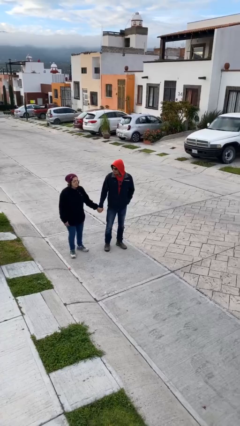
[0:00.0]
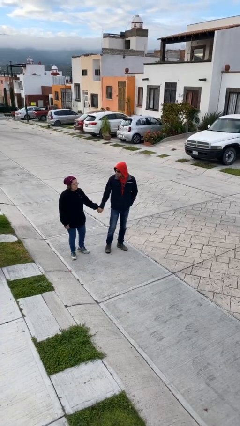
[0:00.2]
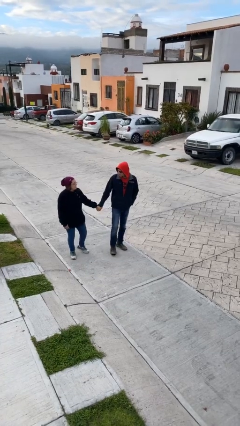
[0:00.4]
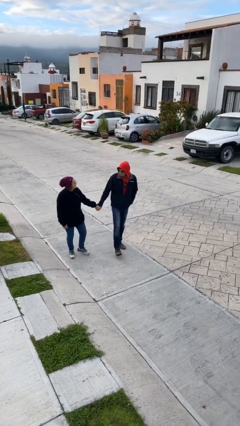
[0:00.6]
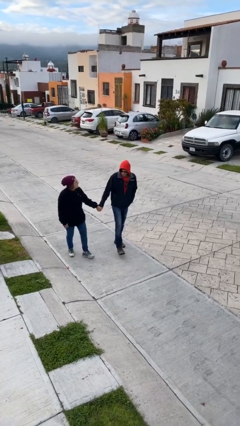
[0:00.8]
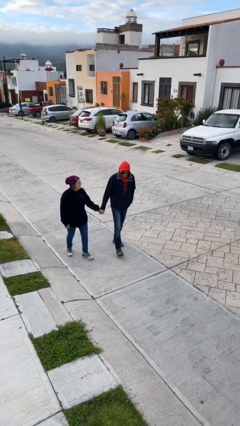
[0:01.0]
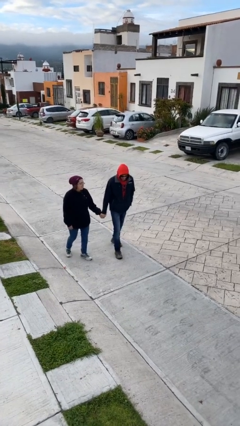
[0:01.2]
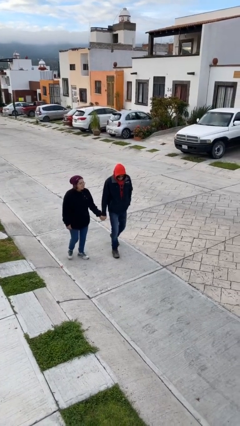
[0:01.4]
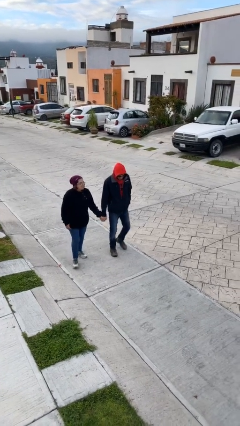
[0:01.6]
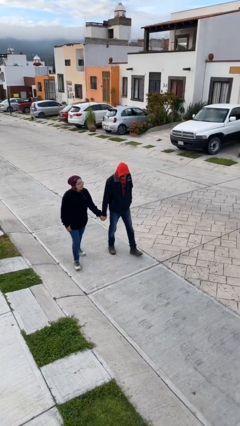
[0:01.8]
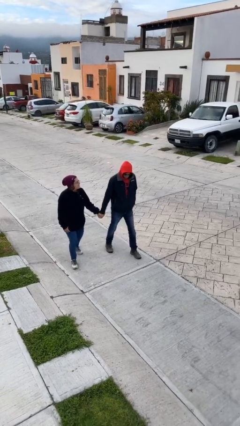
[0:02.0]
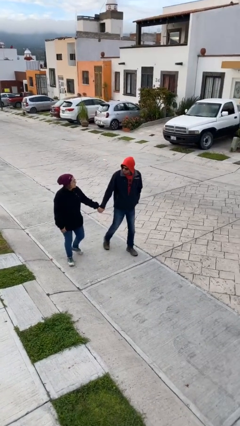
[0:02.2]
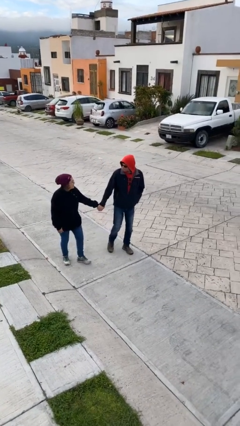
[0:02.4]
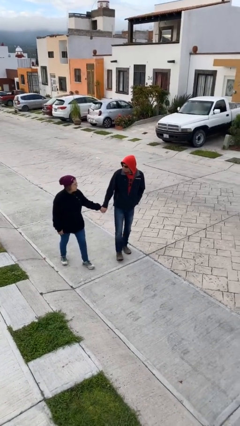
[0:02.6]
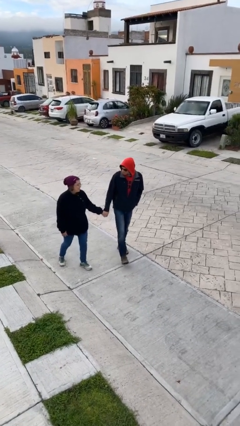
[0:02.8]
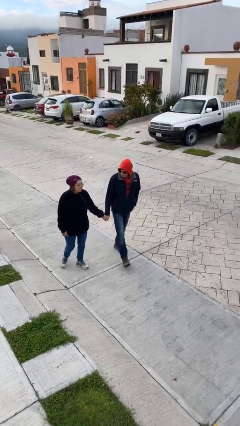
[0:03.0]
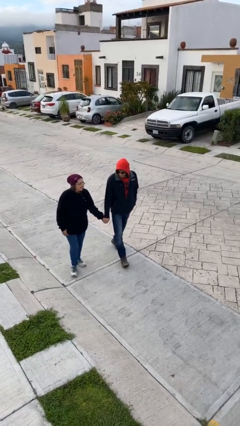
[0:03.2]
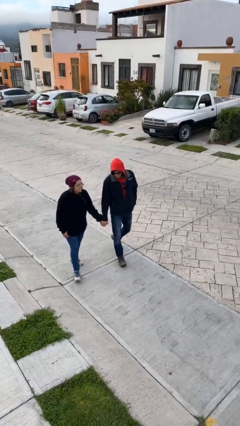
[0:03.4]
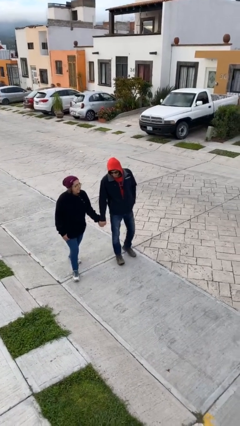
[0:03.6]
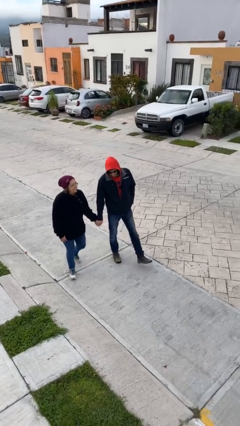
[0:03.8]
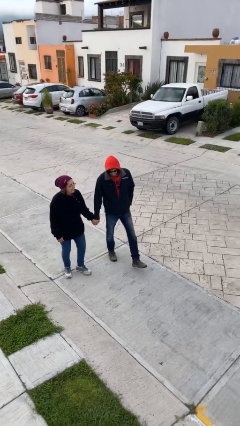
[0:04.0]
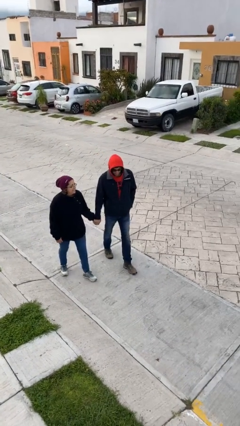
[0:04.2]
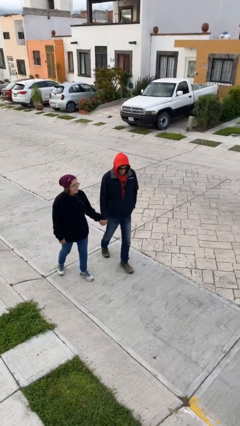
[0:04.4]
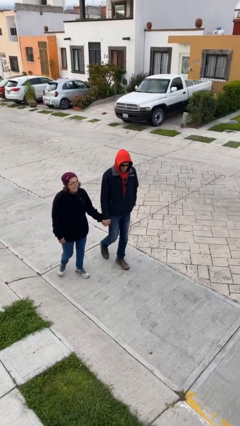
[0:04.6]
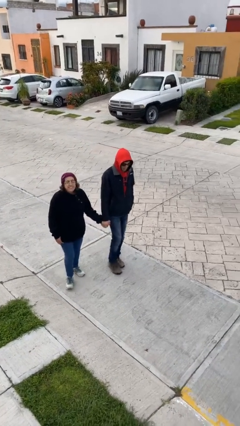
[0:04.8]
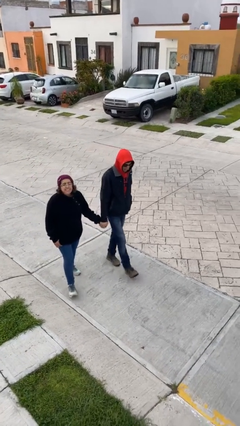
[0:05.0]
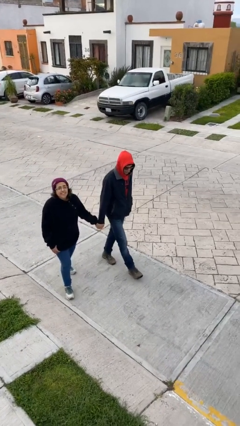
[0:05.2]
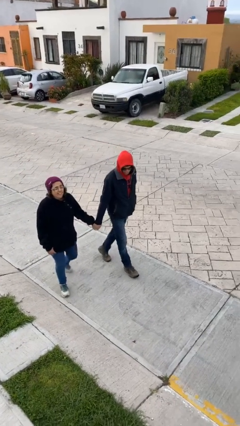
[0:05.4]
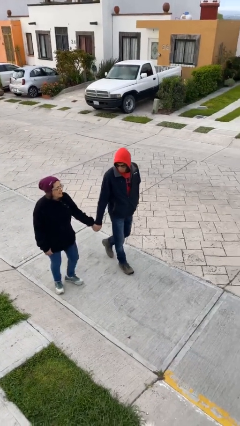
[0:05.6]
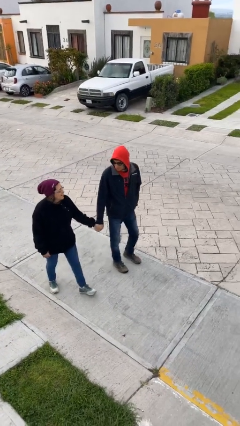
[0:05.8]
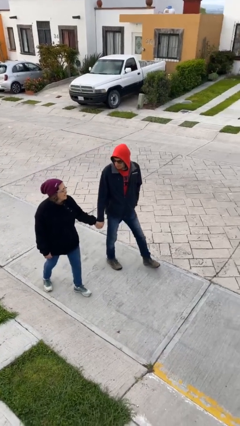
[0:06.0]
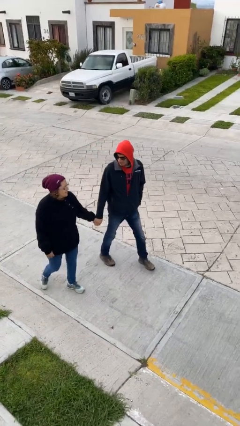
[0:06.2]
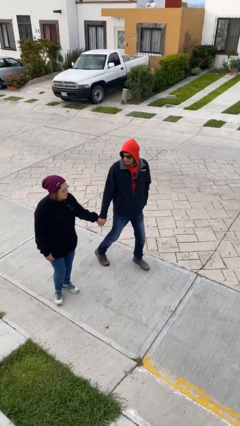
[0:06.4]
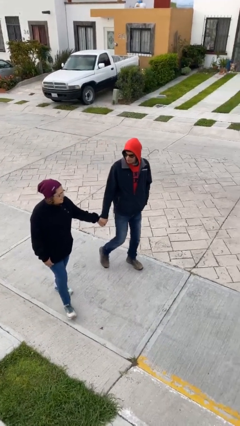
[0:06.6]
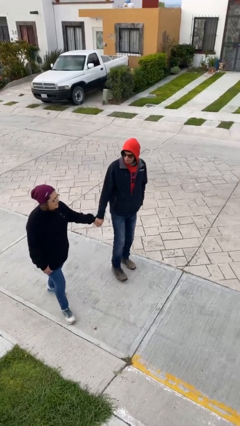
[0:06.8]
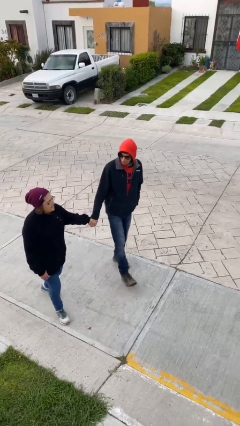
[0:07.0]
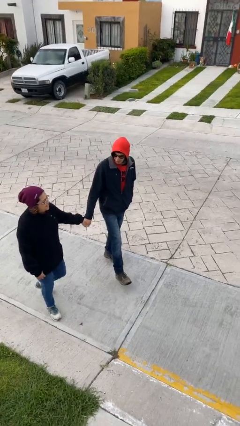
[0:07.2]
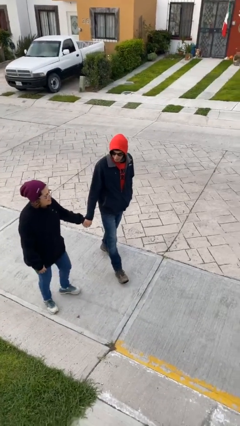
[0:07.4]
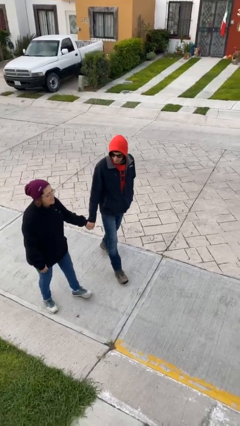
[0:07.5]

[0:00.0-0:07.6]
person holds hand

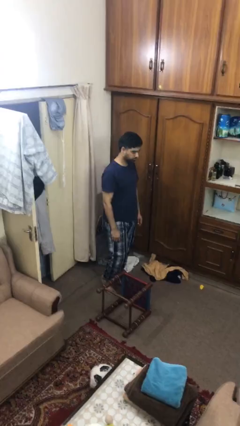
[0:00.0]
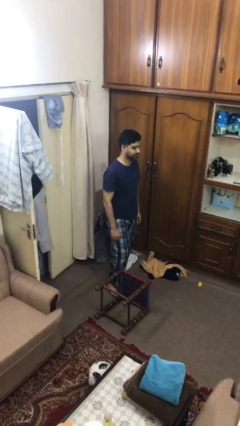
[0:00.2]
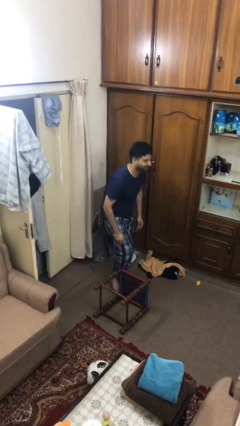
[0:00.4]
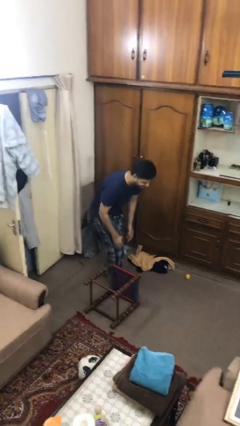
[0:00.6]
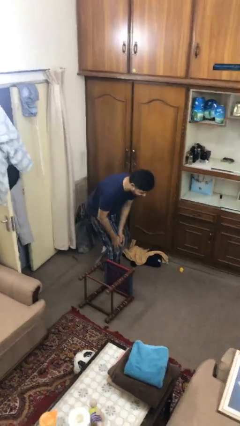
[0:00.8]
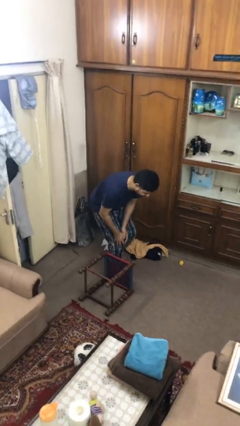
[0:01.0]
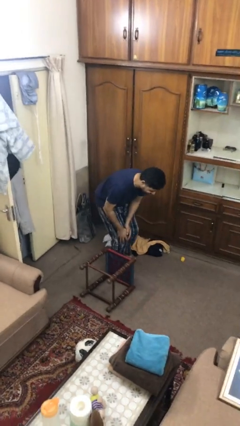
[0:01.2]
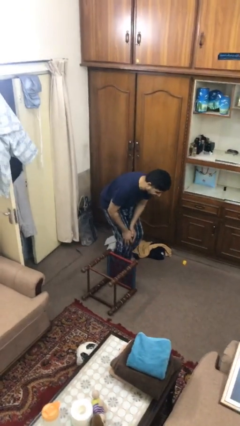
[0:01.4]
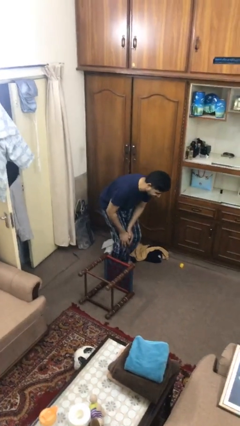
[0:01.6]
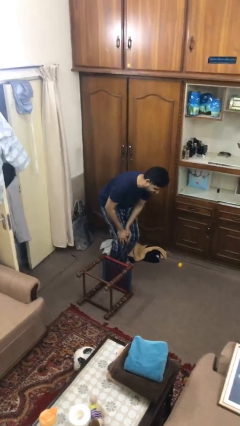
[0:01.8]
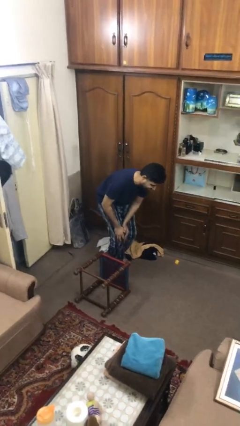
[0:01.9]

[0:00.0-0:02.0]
person trips on object on floor

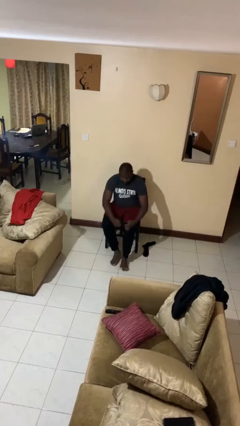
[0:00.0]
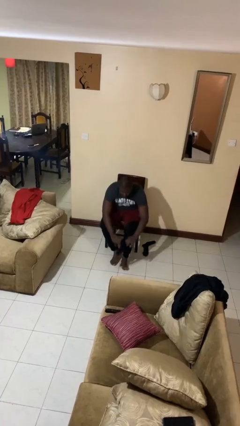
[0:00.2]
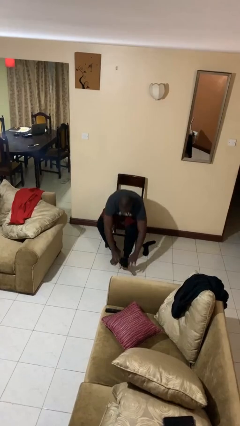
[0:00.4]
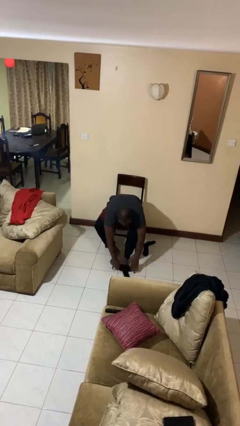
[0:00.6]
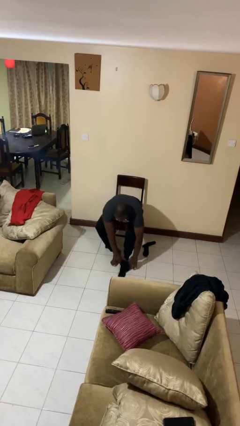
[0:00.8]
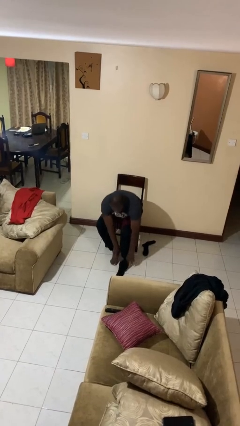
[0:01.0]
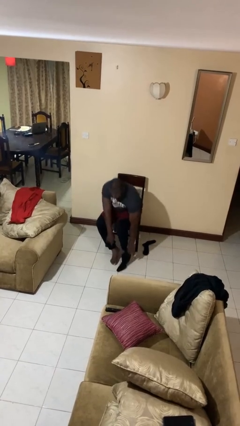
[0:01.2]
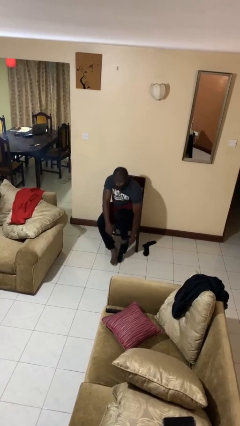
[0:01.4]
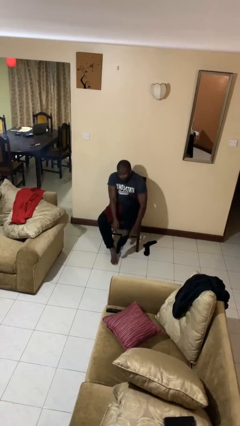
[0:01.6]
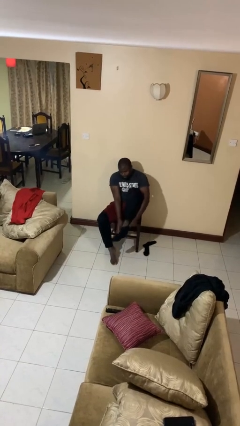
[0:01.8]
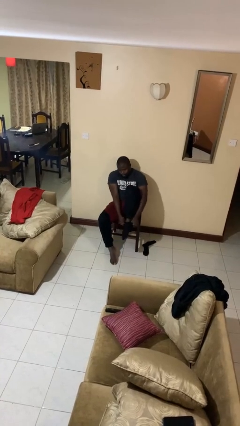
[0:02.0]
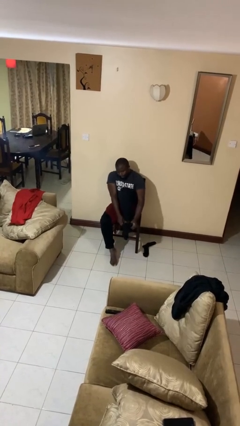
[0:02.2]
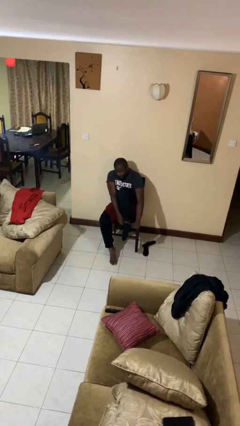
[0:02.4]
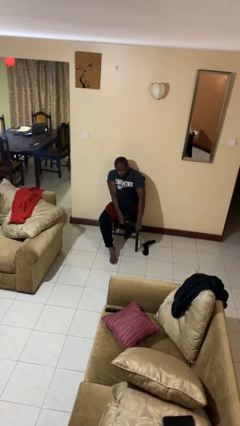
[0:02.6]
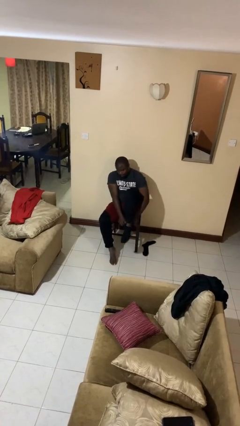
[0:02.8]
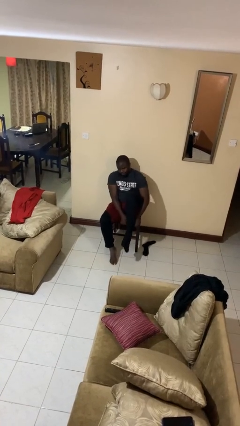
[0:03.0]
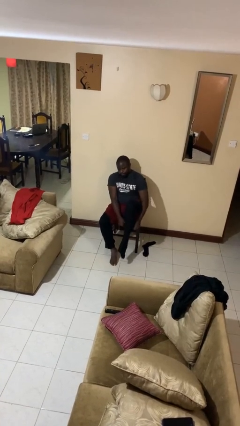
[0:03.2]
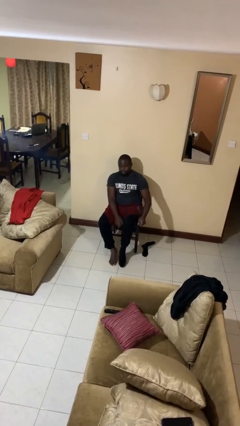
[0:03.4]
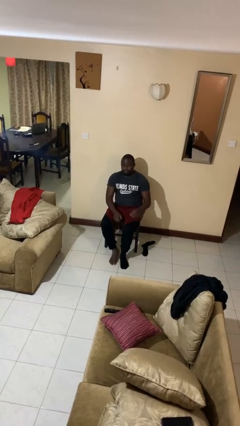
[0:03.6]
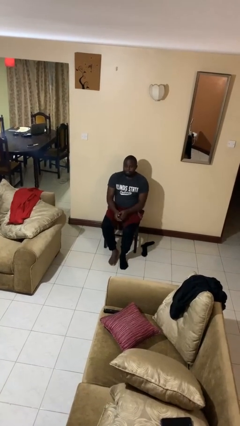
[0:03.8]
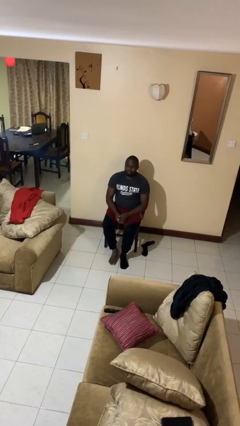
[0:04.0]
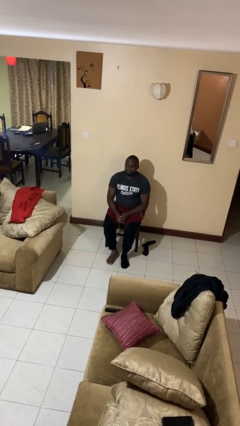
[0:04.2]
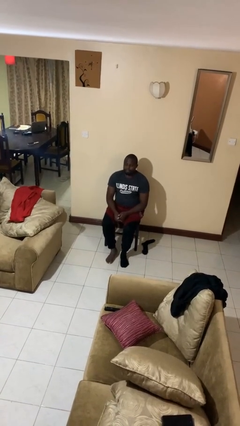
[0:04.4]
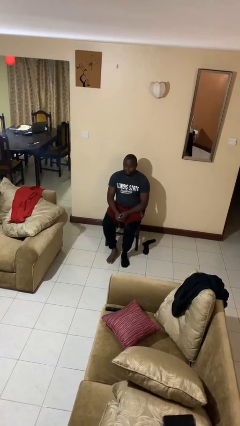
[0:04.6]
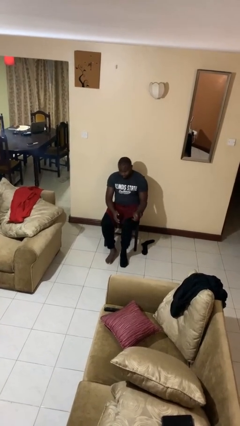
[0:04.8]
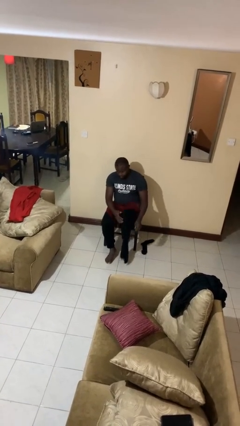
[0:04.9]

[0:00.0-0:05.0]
person puts on socks

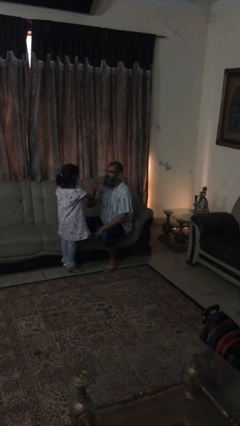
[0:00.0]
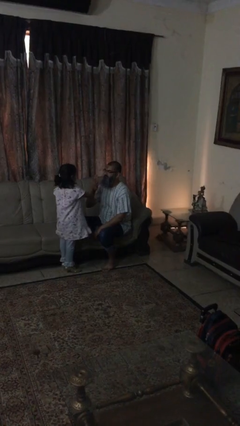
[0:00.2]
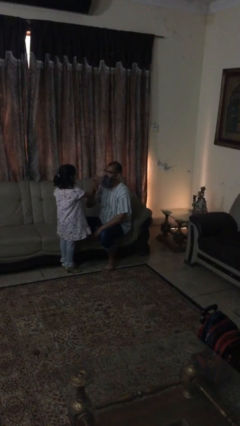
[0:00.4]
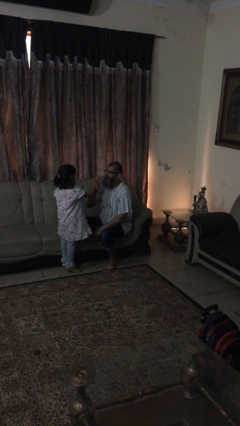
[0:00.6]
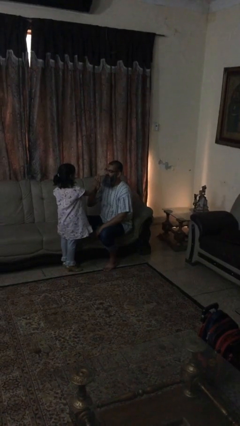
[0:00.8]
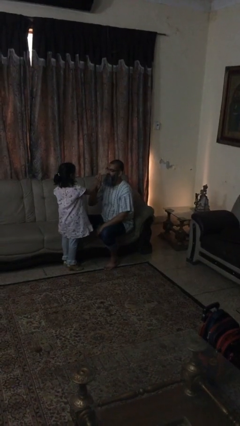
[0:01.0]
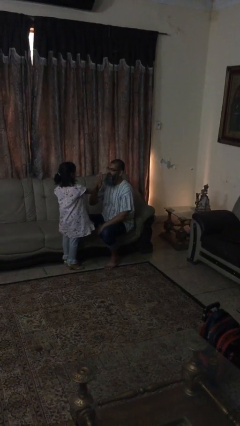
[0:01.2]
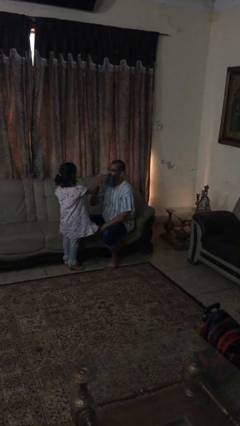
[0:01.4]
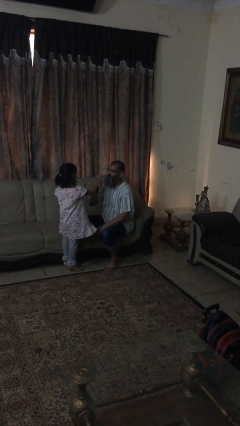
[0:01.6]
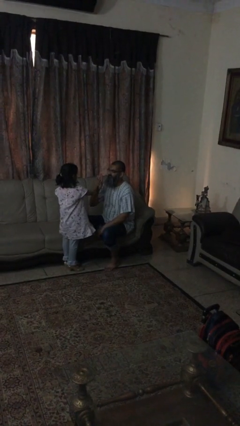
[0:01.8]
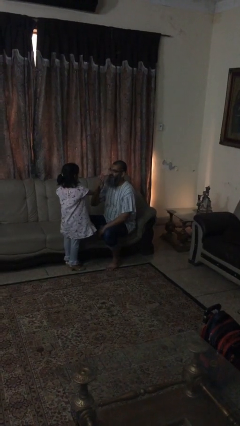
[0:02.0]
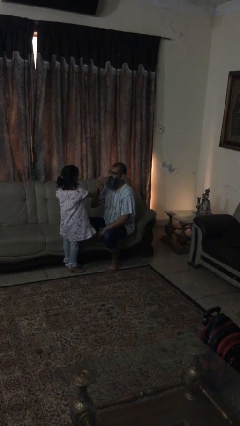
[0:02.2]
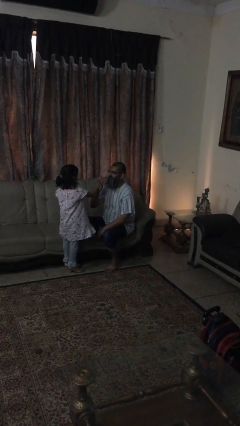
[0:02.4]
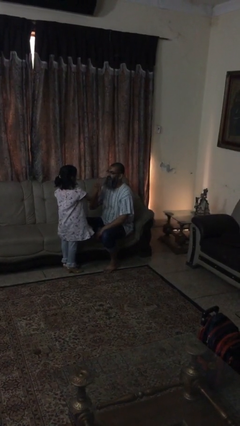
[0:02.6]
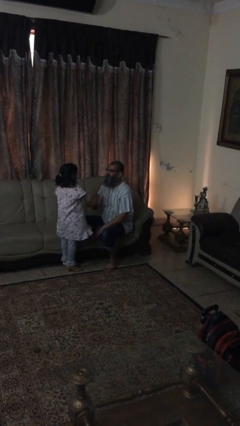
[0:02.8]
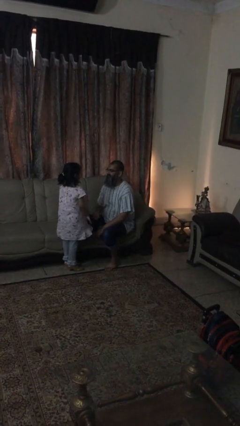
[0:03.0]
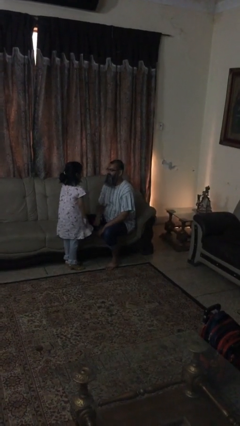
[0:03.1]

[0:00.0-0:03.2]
person highfives hand
